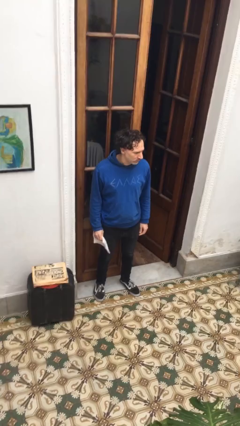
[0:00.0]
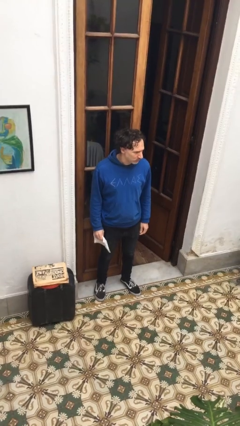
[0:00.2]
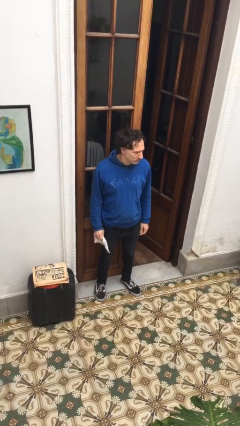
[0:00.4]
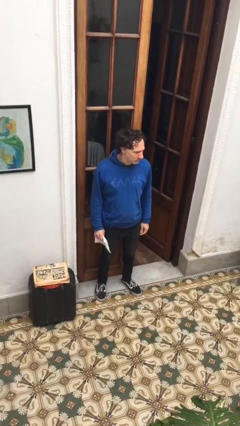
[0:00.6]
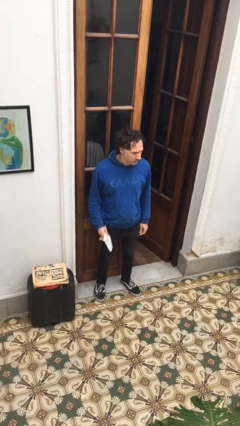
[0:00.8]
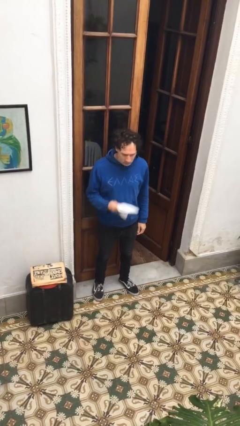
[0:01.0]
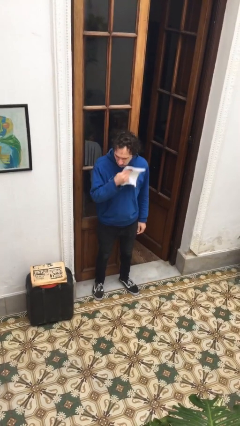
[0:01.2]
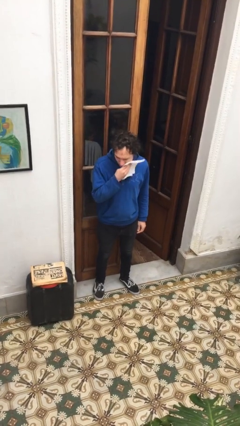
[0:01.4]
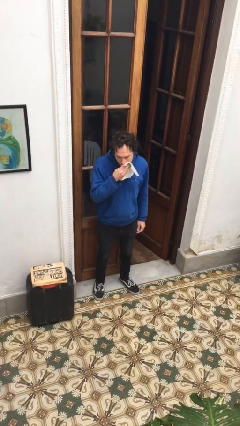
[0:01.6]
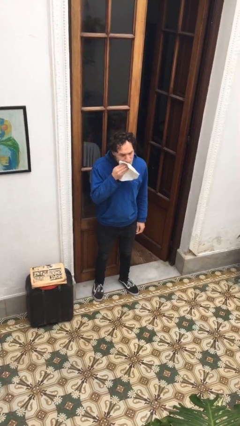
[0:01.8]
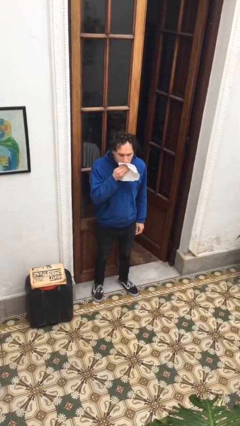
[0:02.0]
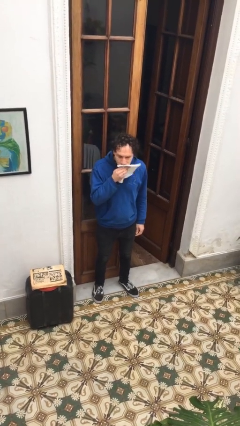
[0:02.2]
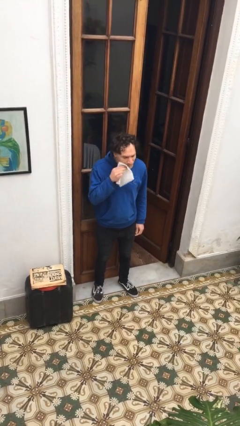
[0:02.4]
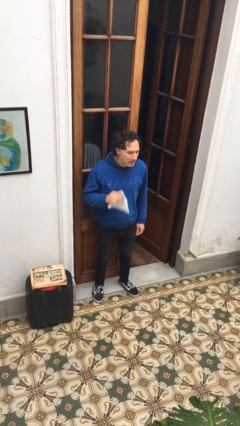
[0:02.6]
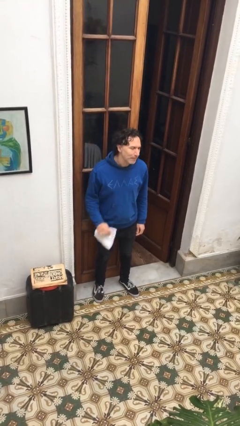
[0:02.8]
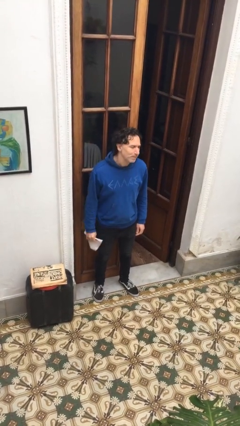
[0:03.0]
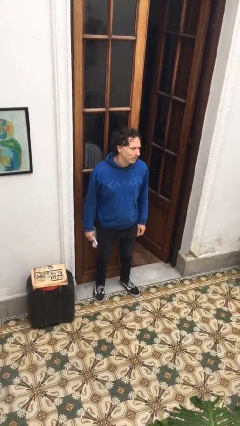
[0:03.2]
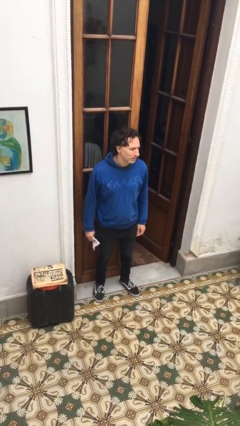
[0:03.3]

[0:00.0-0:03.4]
person wipes mouth with napkin

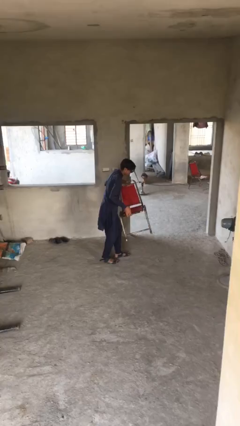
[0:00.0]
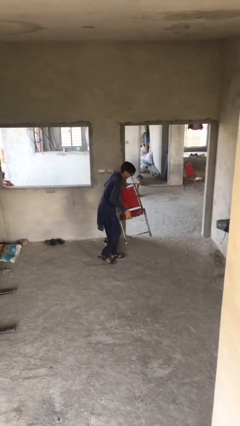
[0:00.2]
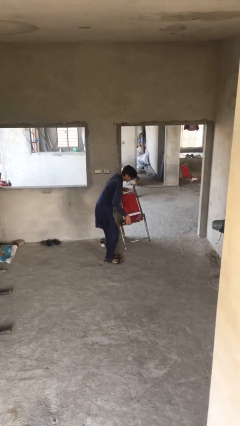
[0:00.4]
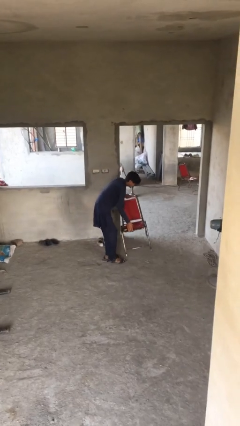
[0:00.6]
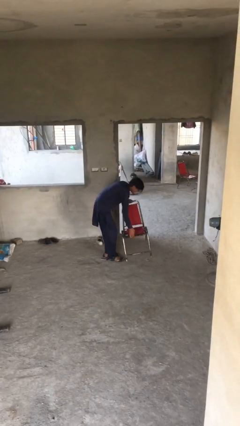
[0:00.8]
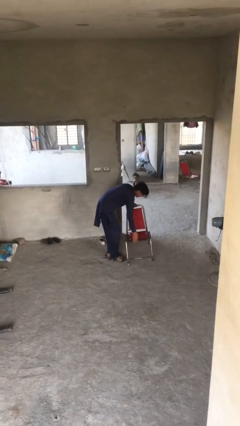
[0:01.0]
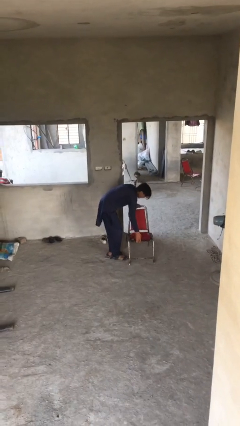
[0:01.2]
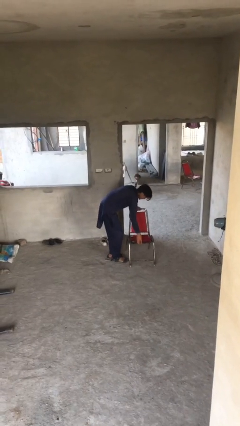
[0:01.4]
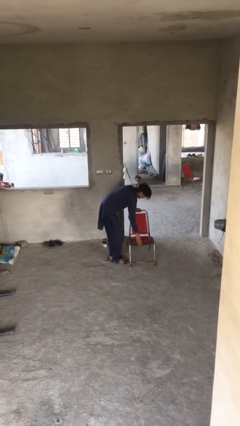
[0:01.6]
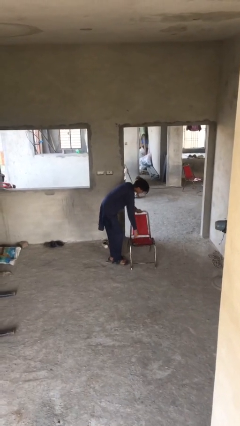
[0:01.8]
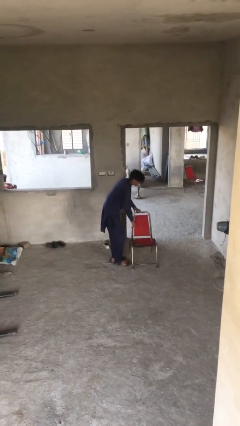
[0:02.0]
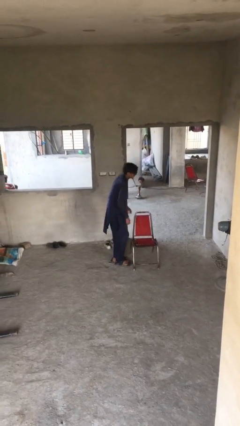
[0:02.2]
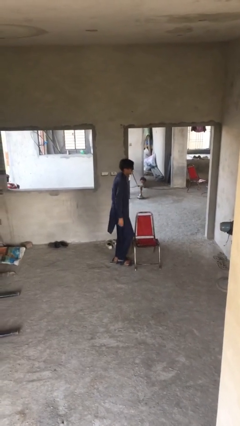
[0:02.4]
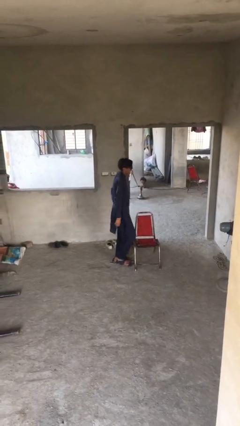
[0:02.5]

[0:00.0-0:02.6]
person puts down object on floor

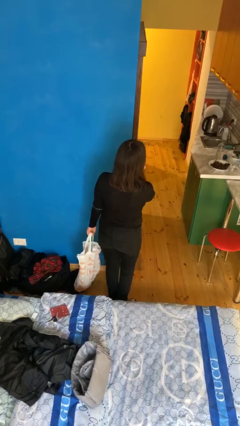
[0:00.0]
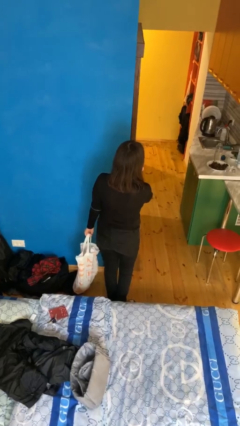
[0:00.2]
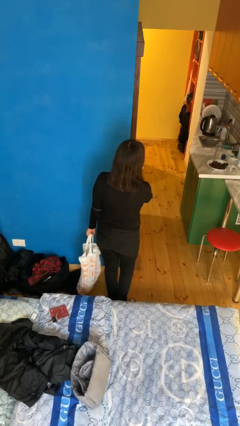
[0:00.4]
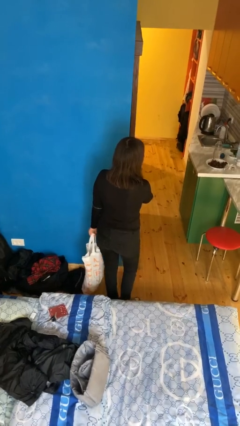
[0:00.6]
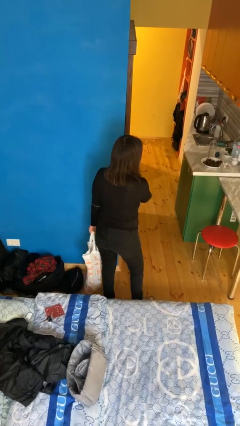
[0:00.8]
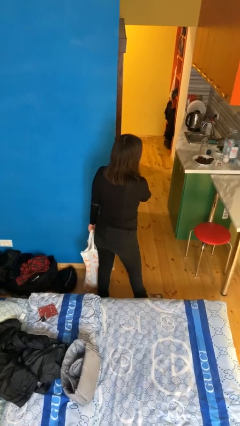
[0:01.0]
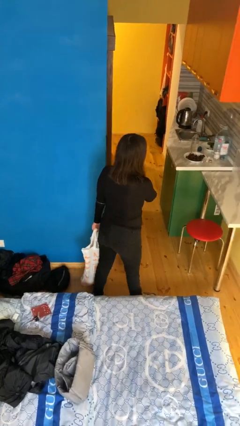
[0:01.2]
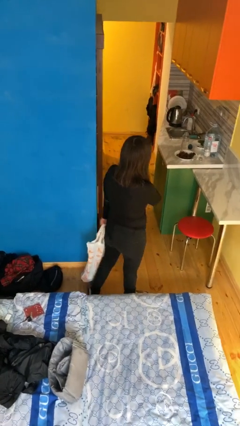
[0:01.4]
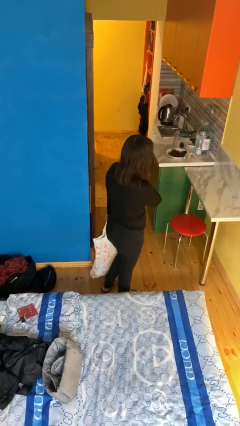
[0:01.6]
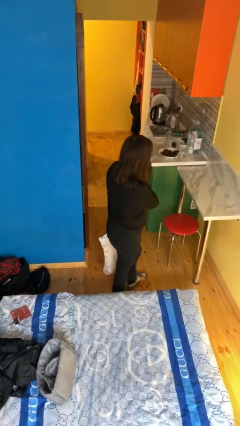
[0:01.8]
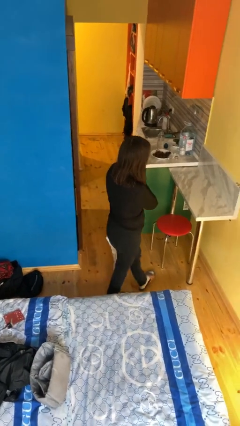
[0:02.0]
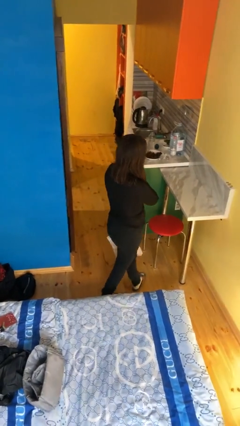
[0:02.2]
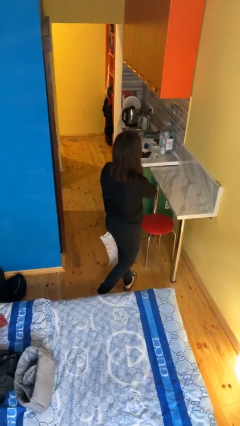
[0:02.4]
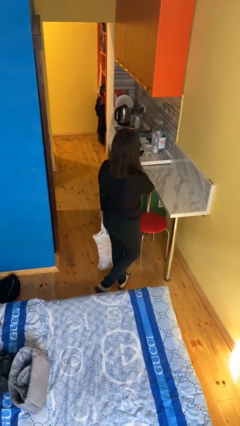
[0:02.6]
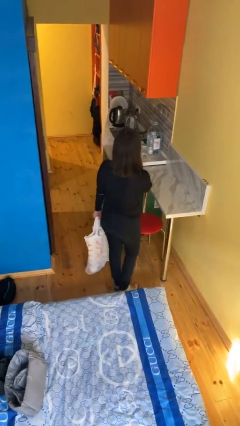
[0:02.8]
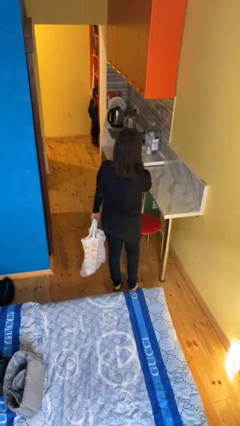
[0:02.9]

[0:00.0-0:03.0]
person carries groceries

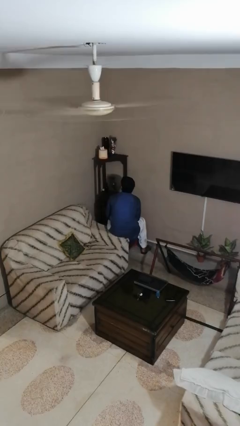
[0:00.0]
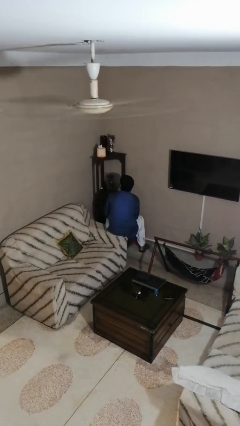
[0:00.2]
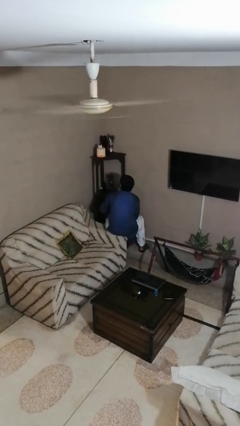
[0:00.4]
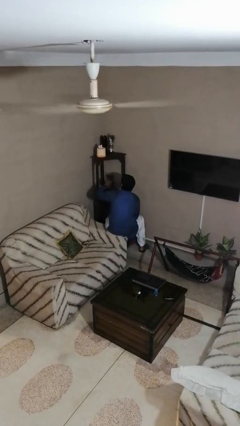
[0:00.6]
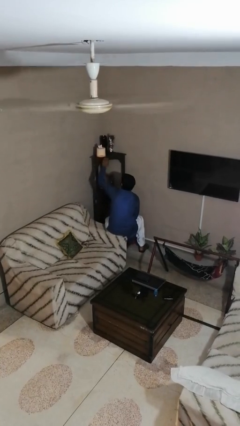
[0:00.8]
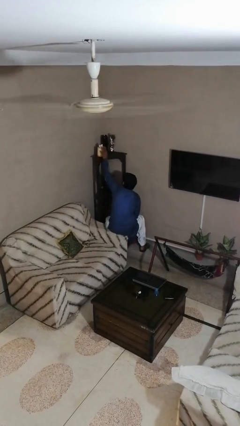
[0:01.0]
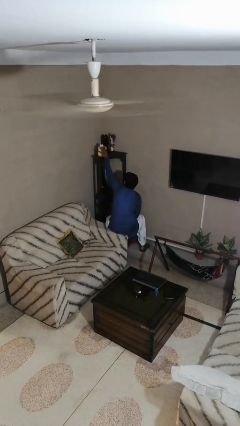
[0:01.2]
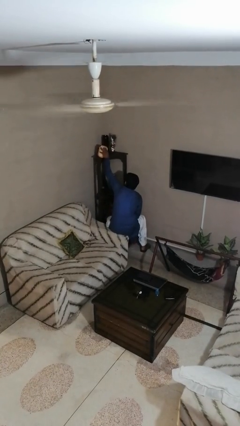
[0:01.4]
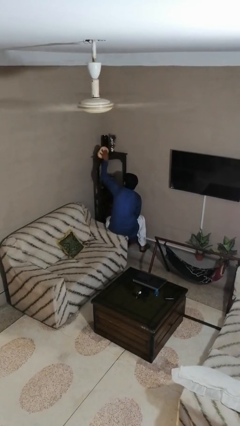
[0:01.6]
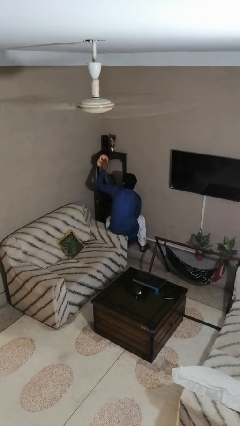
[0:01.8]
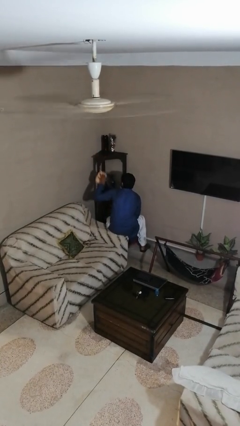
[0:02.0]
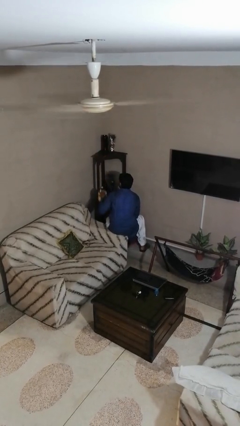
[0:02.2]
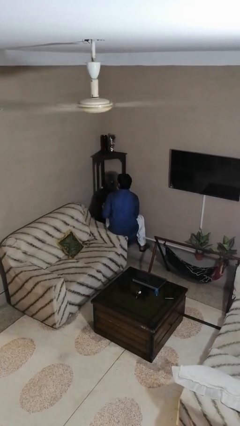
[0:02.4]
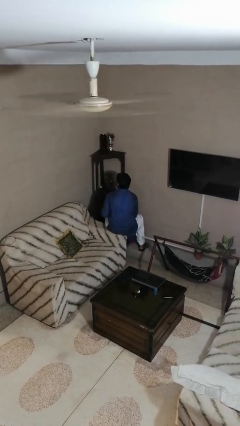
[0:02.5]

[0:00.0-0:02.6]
person picks up object from shelf

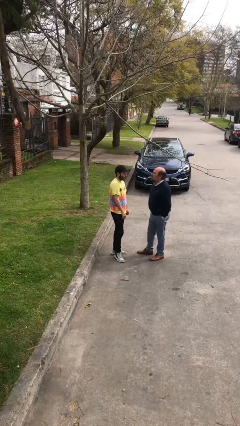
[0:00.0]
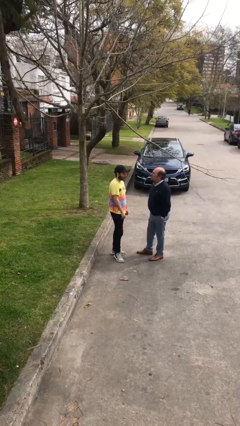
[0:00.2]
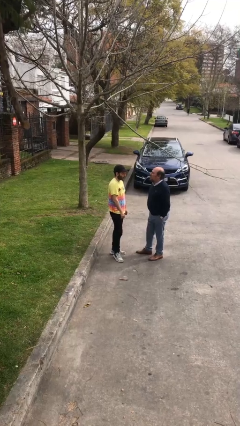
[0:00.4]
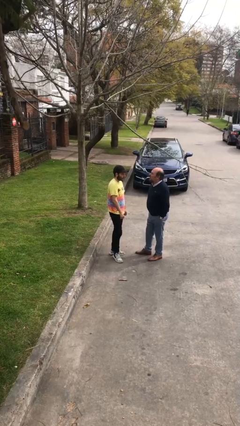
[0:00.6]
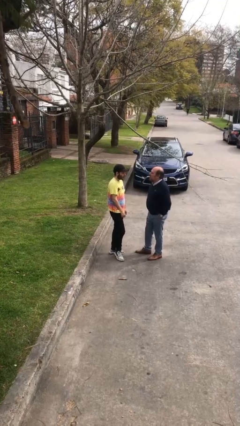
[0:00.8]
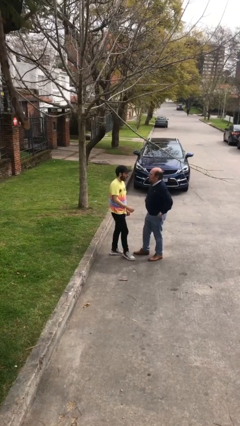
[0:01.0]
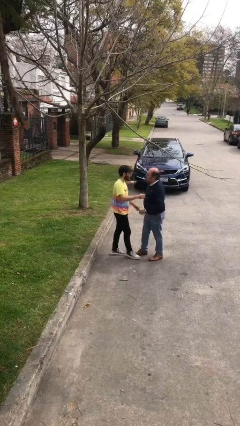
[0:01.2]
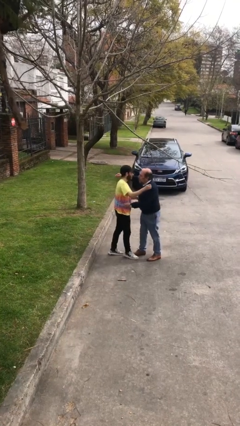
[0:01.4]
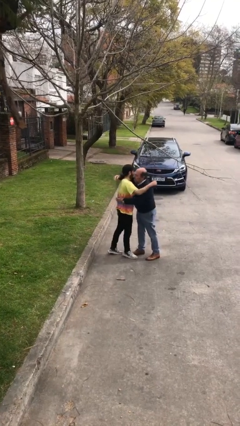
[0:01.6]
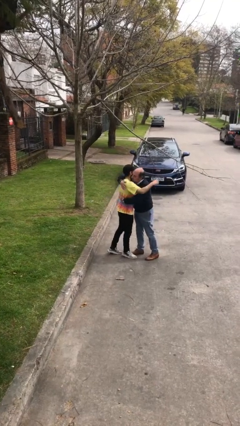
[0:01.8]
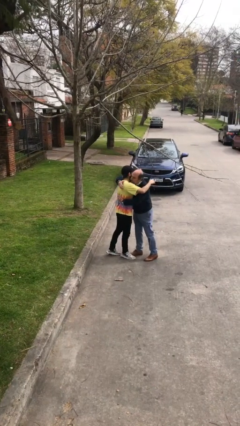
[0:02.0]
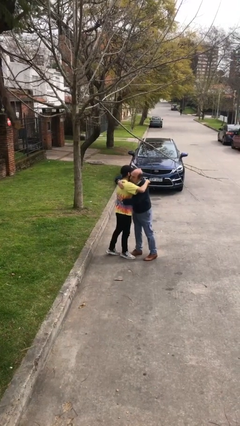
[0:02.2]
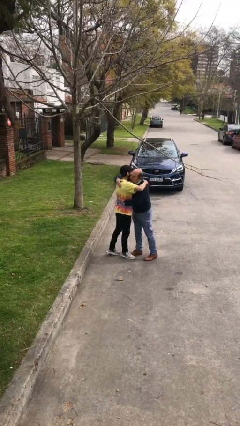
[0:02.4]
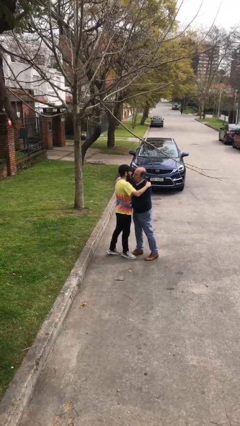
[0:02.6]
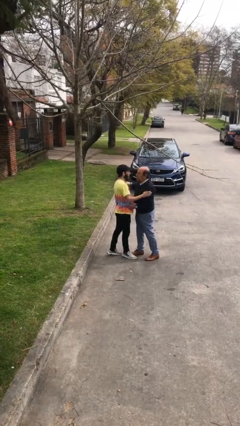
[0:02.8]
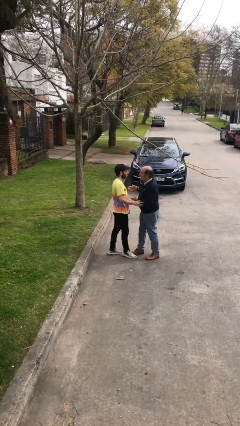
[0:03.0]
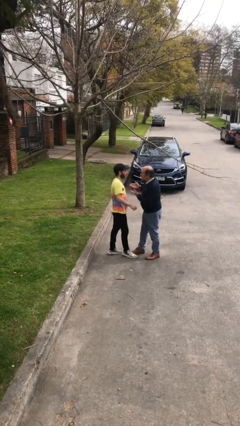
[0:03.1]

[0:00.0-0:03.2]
person embraces person

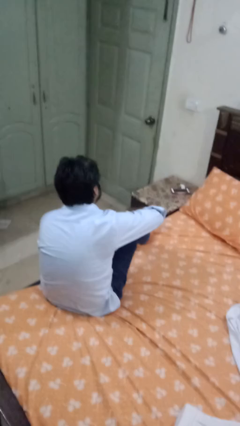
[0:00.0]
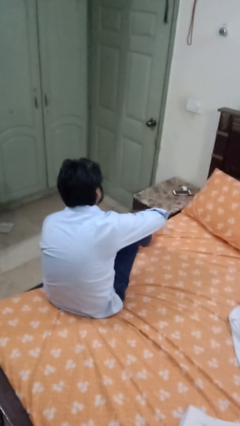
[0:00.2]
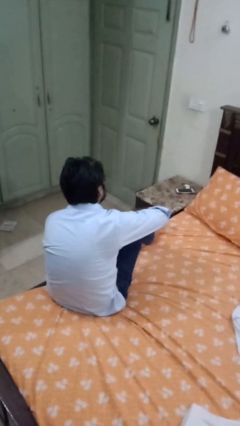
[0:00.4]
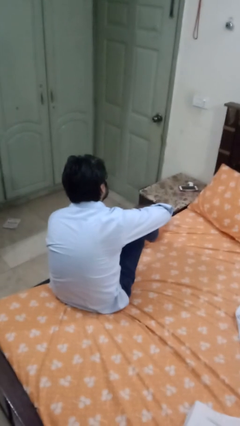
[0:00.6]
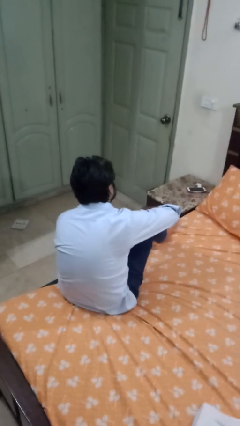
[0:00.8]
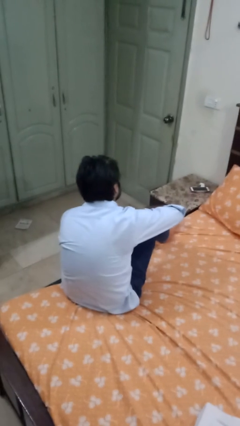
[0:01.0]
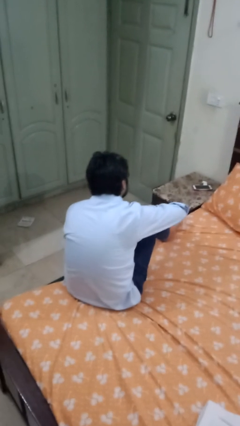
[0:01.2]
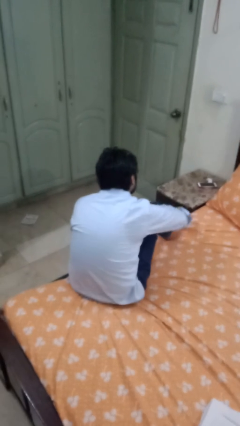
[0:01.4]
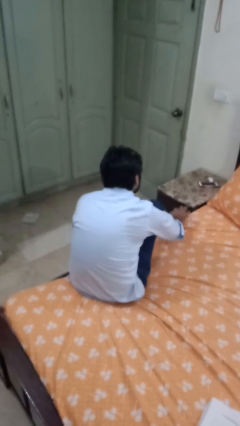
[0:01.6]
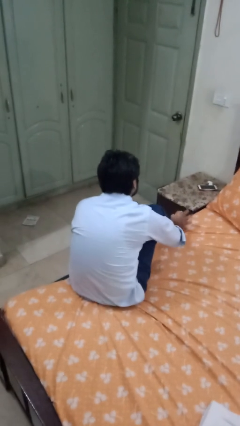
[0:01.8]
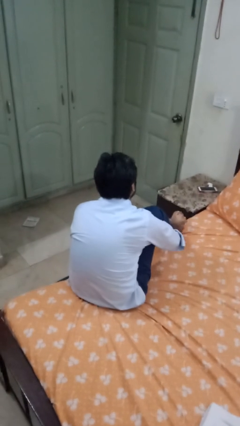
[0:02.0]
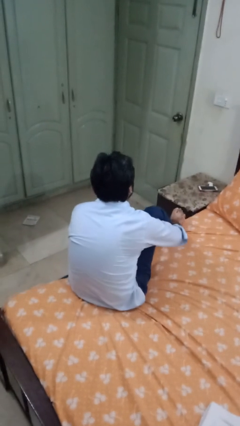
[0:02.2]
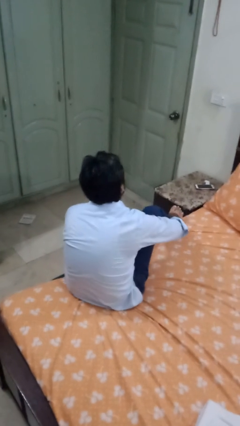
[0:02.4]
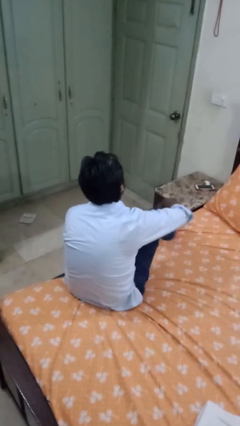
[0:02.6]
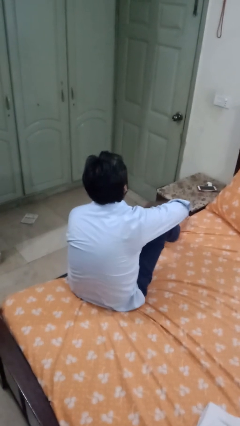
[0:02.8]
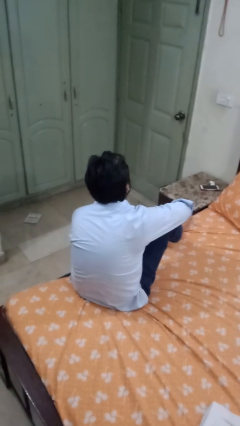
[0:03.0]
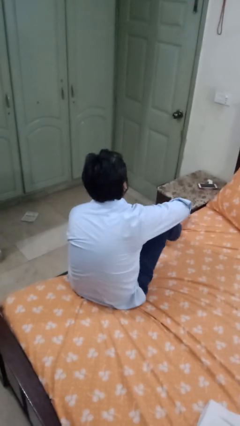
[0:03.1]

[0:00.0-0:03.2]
person rubs foot

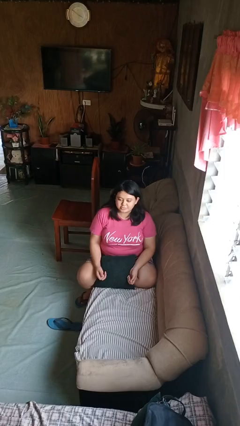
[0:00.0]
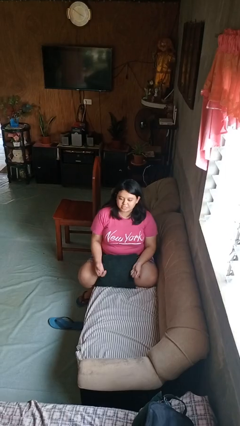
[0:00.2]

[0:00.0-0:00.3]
person shrugs
